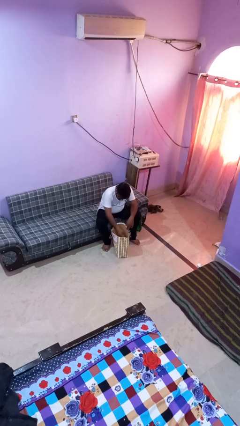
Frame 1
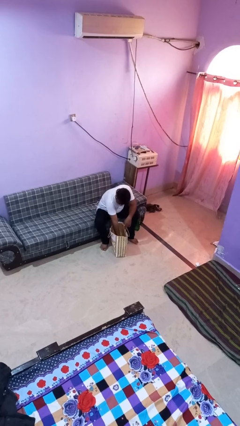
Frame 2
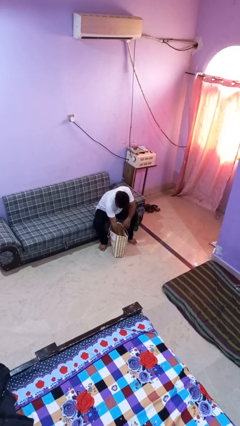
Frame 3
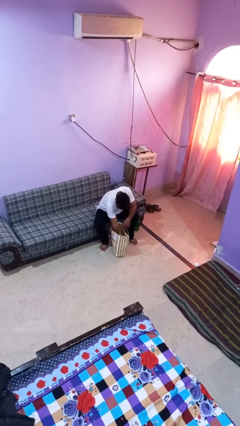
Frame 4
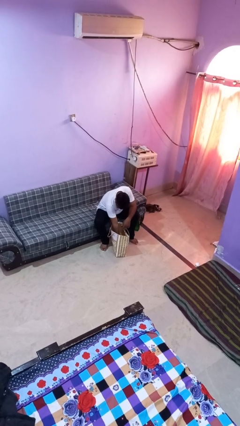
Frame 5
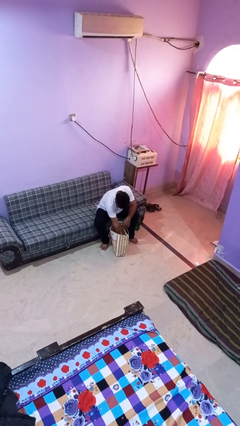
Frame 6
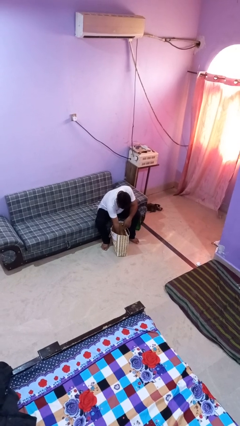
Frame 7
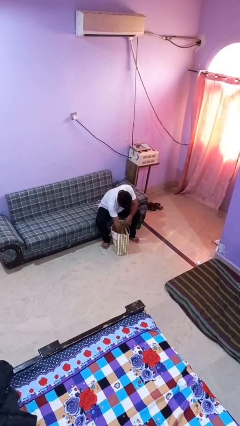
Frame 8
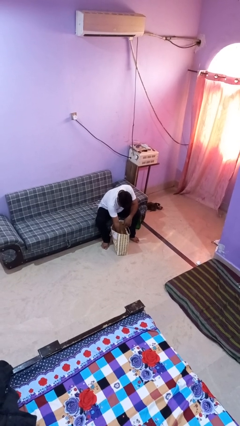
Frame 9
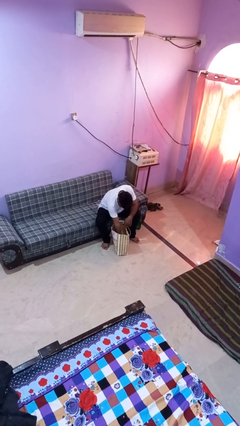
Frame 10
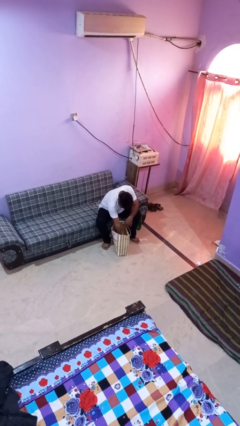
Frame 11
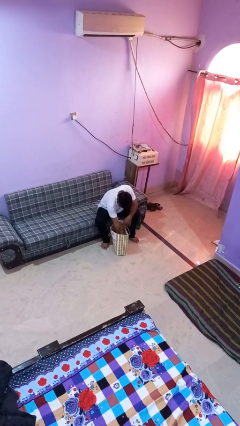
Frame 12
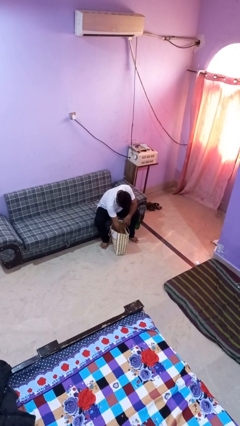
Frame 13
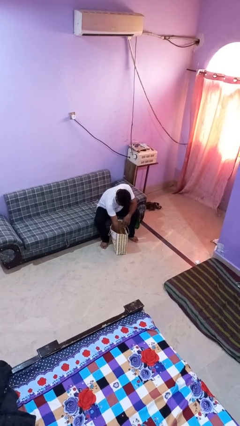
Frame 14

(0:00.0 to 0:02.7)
person searches in bag

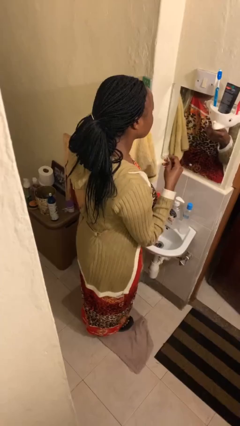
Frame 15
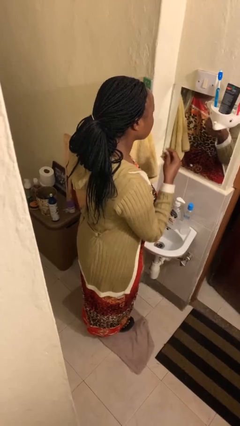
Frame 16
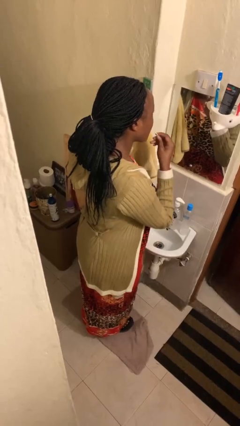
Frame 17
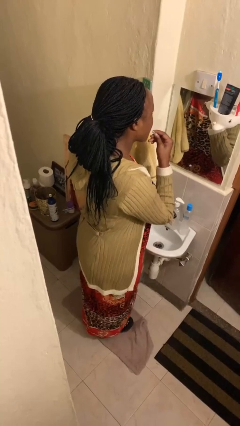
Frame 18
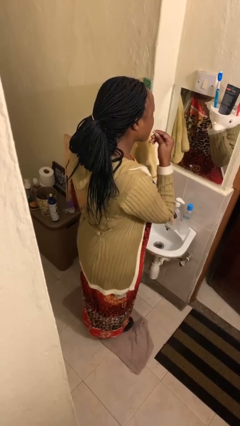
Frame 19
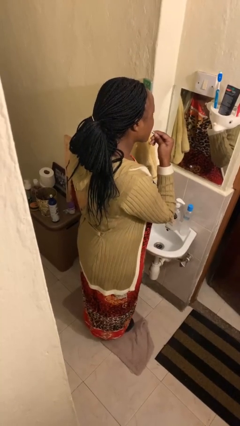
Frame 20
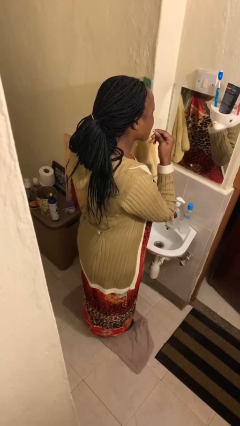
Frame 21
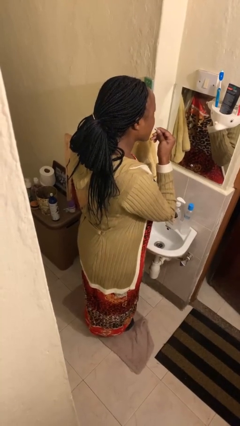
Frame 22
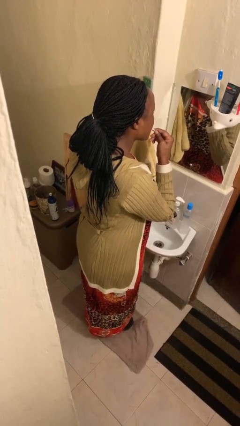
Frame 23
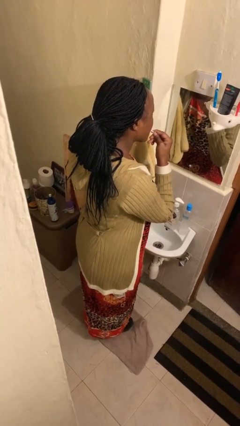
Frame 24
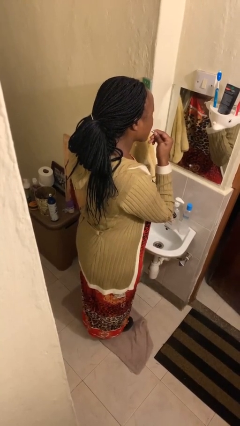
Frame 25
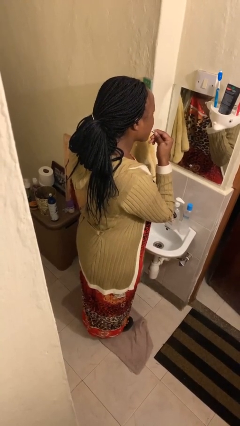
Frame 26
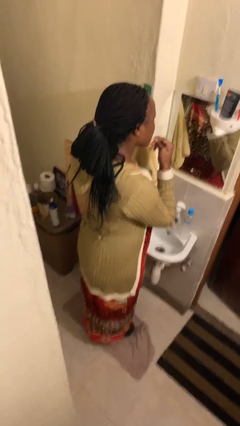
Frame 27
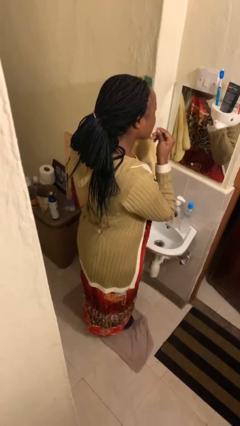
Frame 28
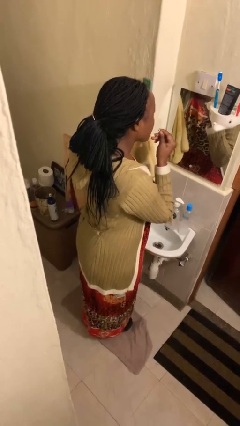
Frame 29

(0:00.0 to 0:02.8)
person flosses

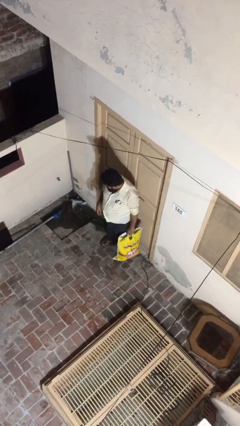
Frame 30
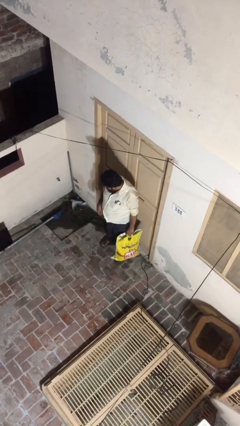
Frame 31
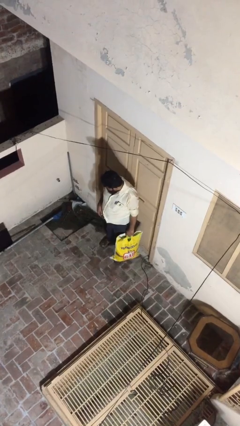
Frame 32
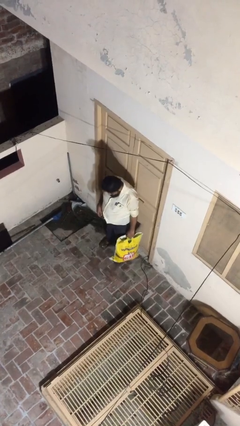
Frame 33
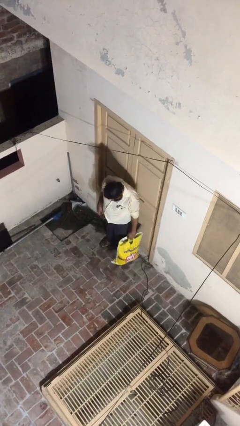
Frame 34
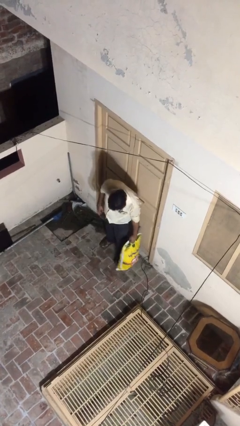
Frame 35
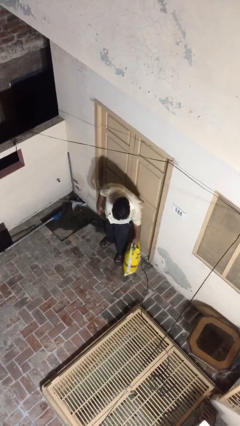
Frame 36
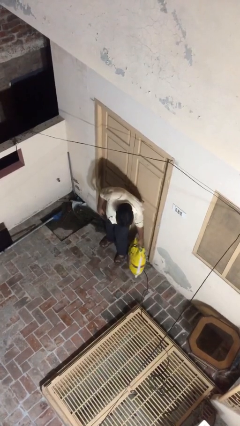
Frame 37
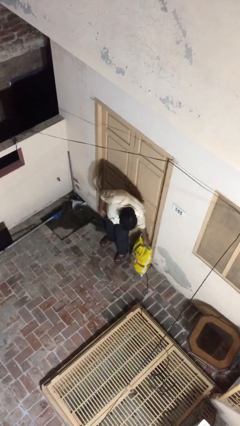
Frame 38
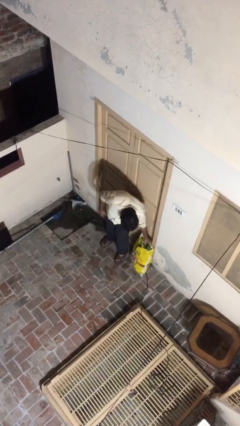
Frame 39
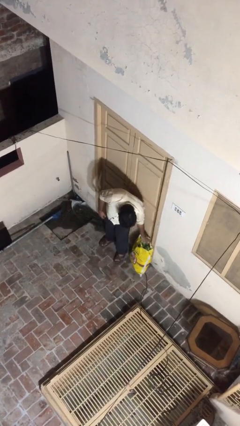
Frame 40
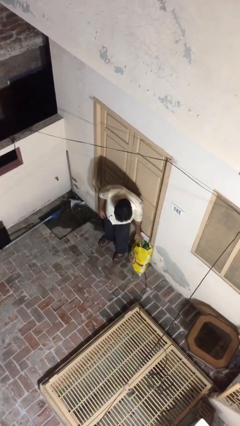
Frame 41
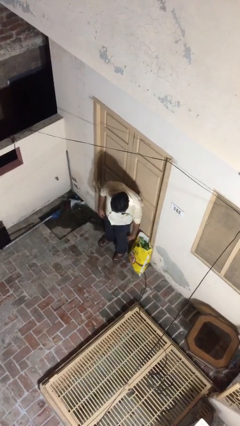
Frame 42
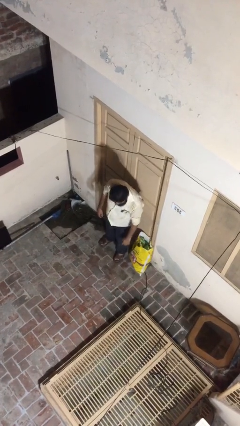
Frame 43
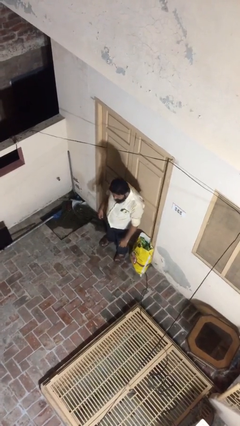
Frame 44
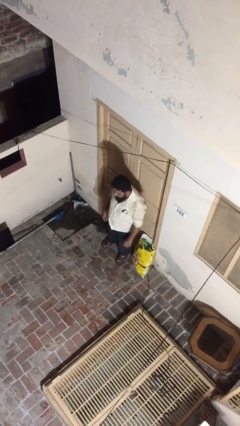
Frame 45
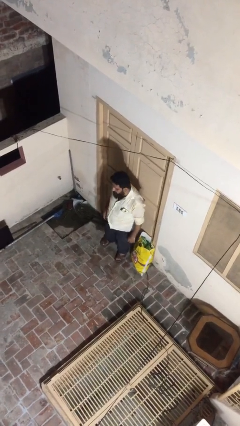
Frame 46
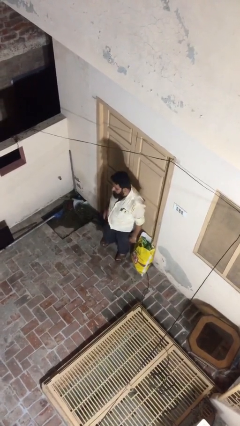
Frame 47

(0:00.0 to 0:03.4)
person puts down object on floor

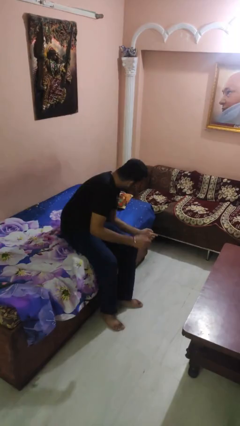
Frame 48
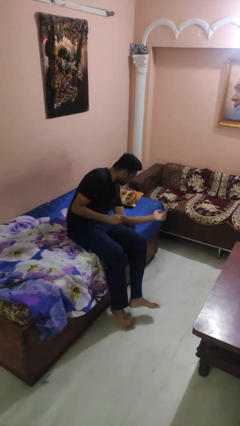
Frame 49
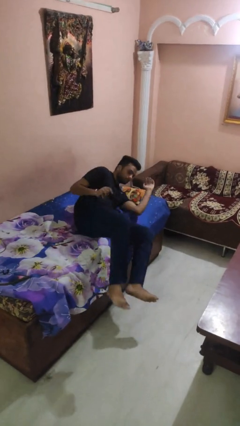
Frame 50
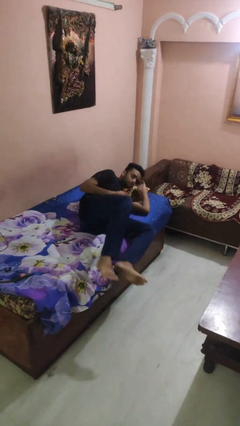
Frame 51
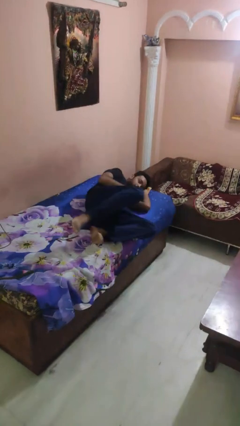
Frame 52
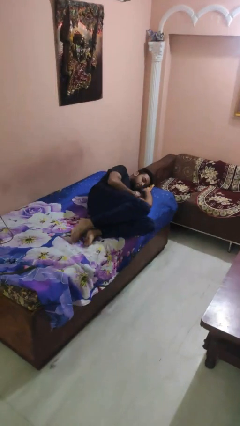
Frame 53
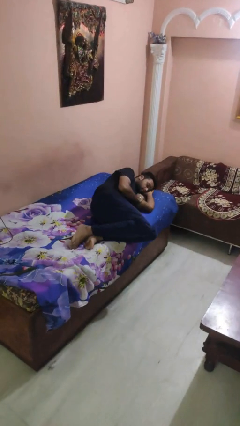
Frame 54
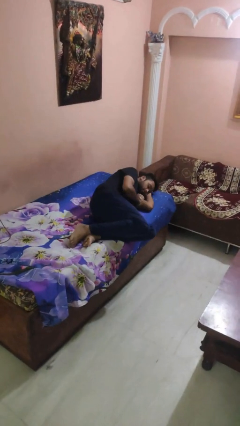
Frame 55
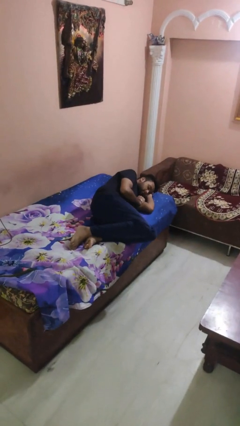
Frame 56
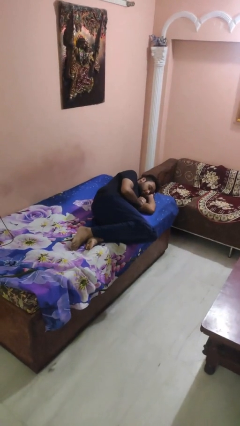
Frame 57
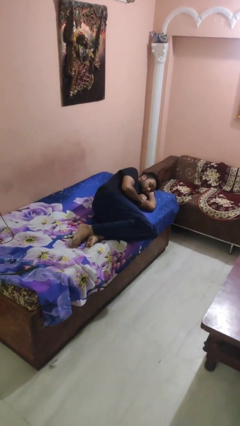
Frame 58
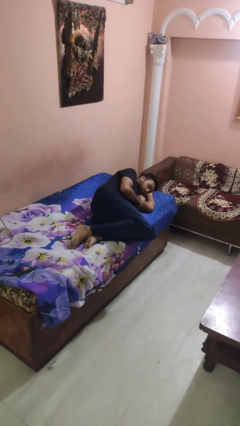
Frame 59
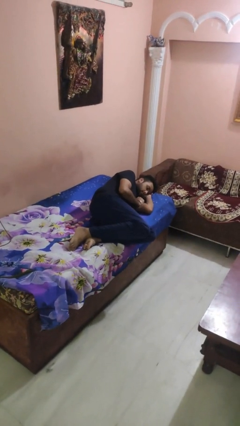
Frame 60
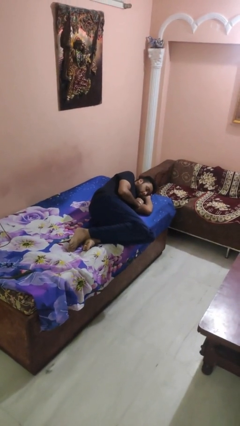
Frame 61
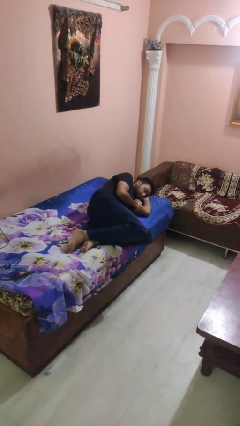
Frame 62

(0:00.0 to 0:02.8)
person lies down on bed

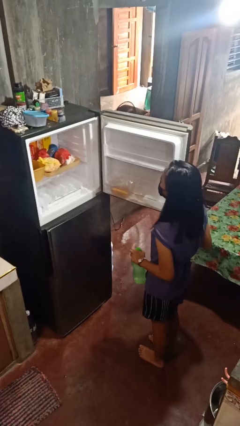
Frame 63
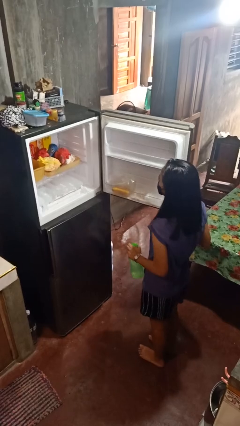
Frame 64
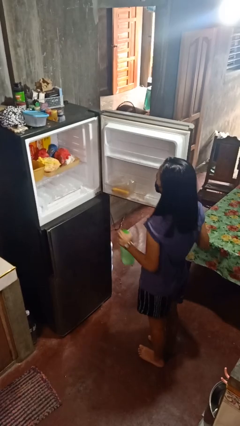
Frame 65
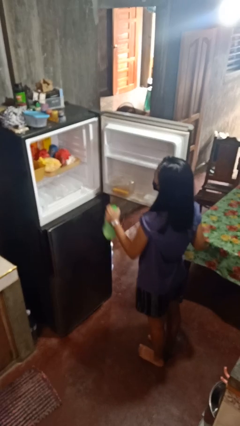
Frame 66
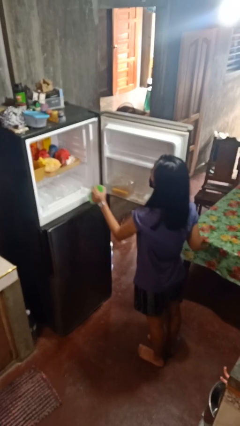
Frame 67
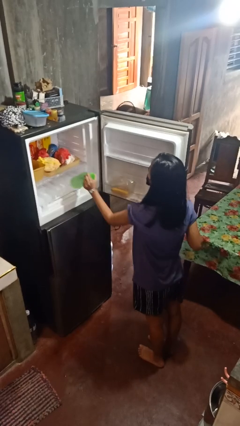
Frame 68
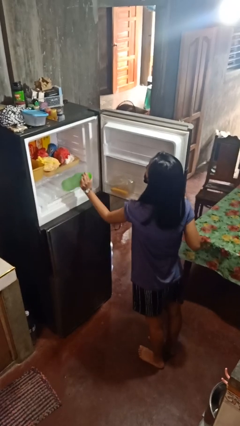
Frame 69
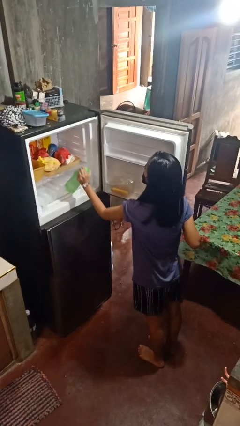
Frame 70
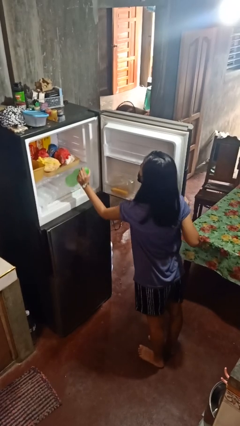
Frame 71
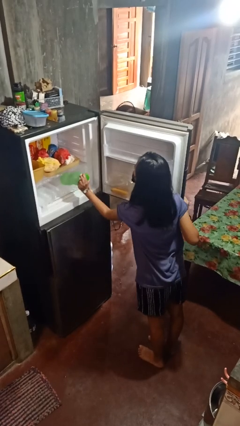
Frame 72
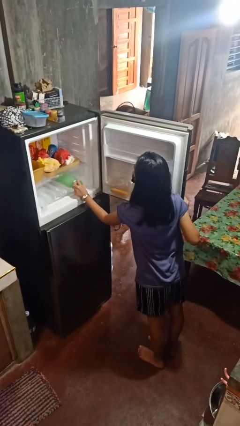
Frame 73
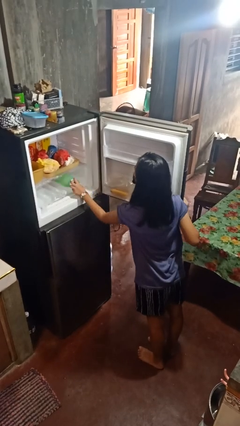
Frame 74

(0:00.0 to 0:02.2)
person puts object into refrigerator

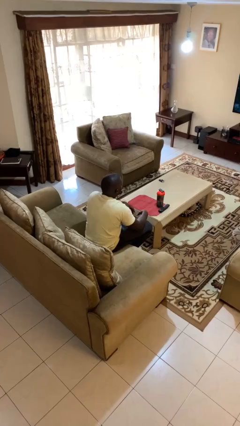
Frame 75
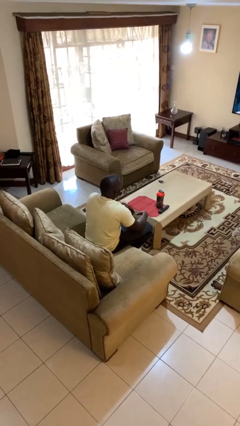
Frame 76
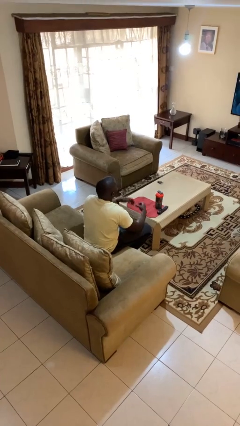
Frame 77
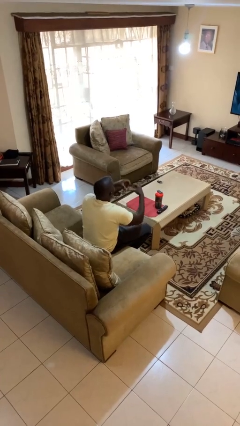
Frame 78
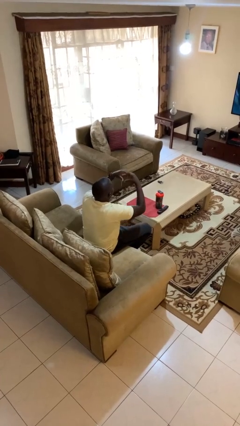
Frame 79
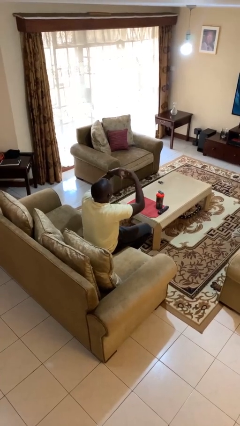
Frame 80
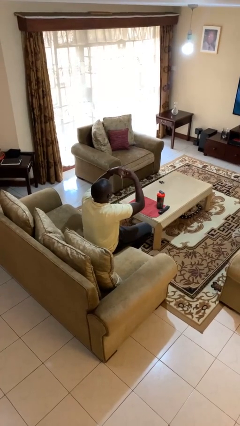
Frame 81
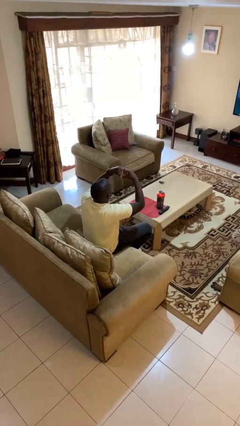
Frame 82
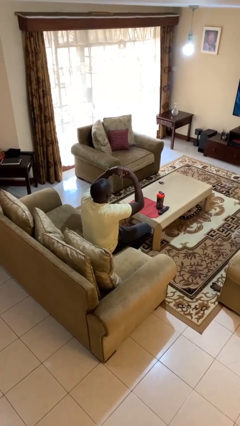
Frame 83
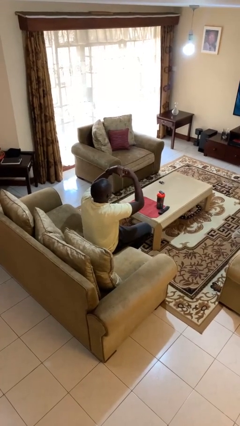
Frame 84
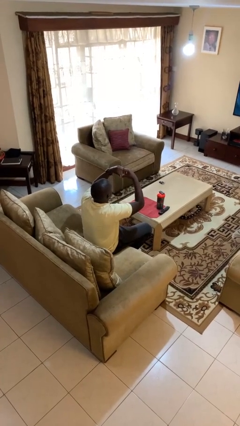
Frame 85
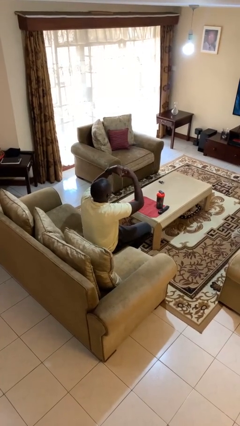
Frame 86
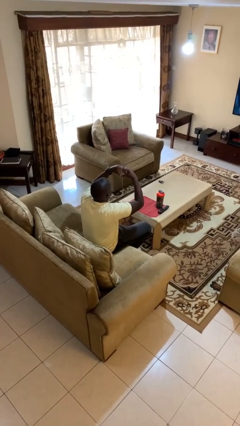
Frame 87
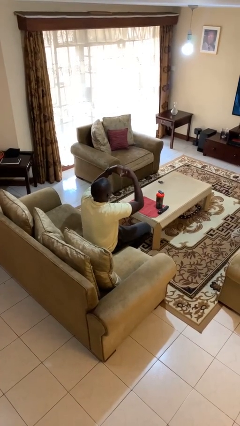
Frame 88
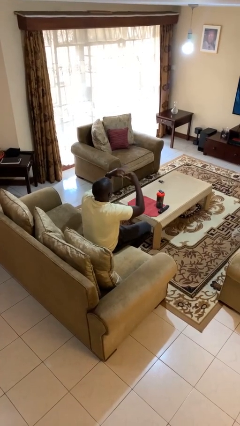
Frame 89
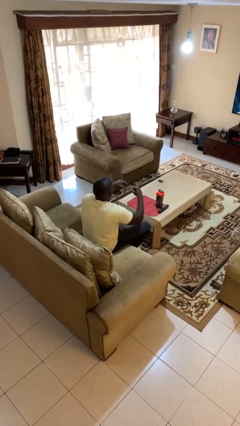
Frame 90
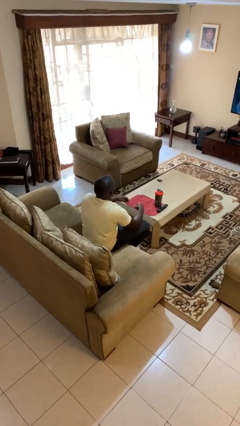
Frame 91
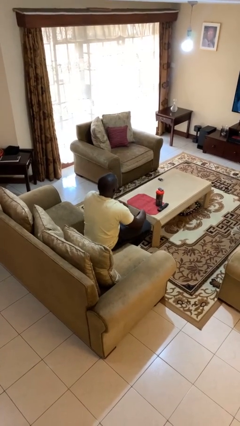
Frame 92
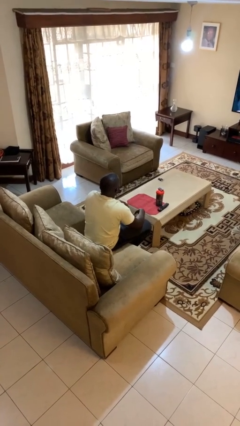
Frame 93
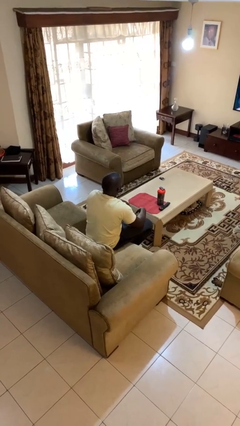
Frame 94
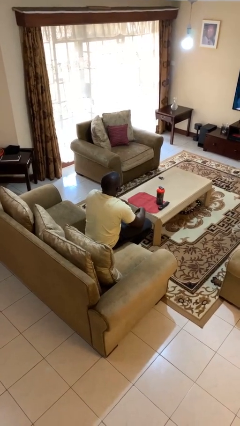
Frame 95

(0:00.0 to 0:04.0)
person gestures heart
